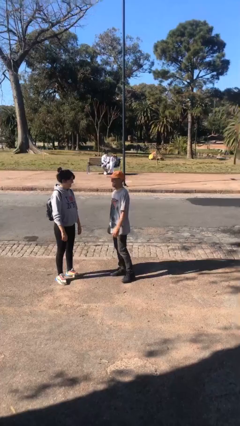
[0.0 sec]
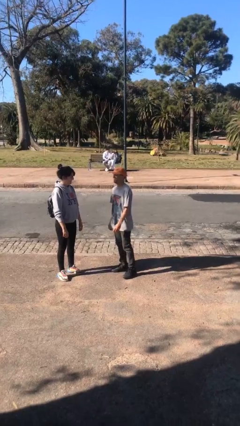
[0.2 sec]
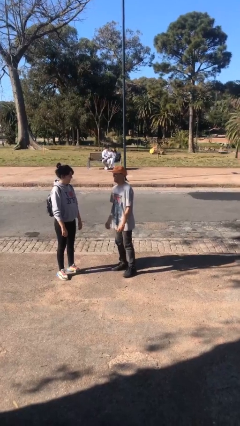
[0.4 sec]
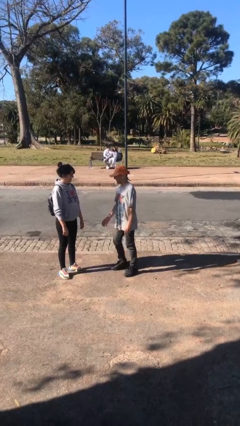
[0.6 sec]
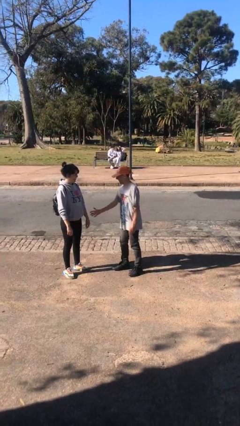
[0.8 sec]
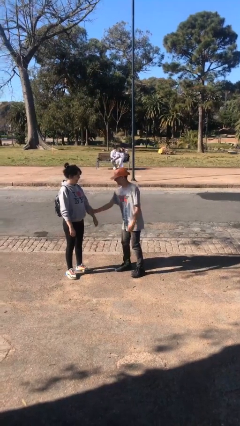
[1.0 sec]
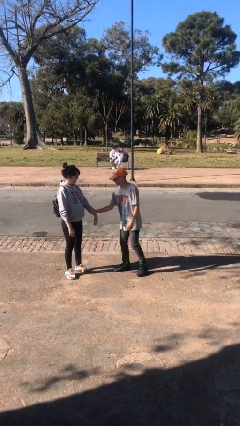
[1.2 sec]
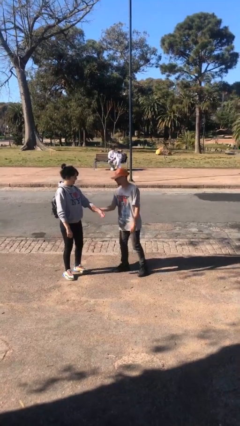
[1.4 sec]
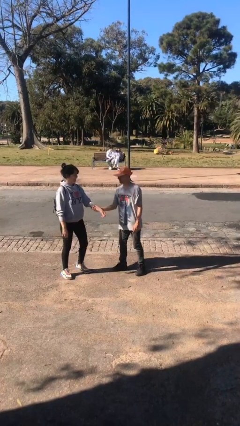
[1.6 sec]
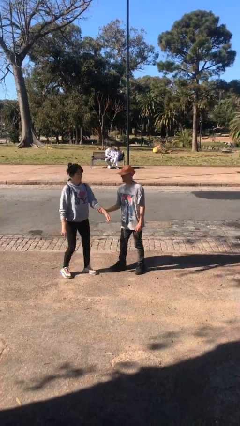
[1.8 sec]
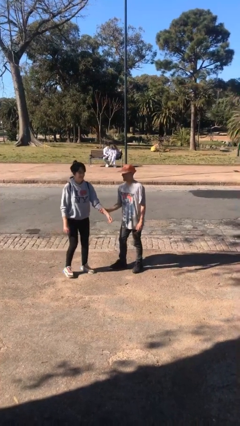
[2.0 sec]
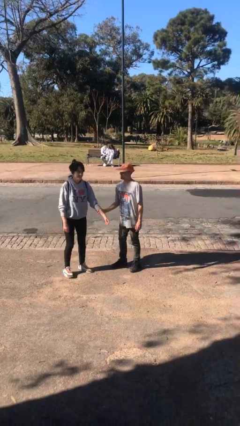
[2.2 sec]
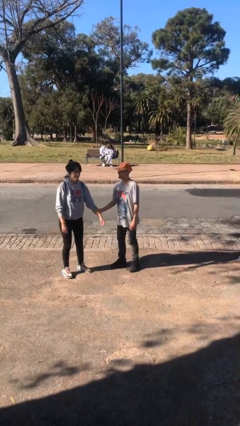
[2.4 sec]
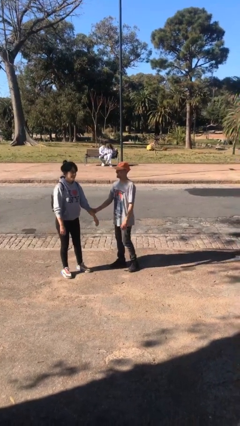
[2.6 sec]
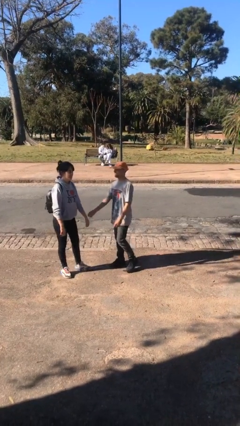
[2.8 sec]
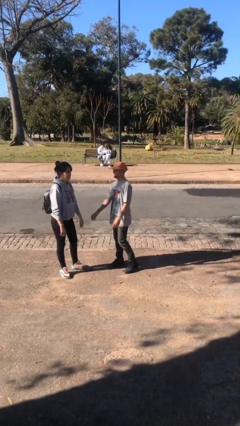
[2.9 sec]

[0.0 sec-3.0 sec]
person grabs person by forearm

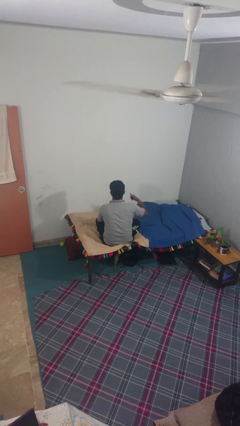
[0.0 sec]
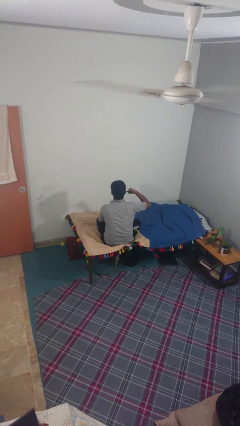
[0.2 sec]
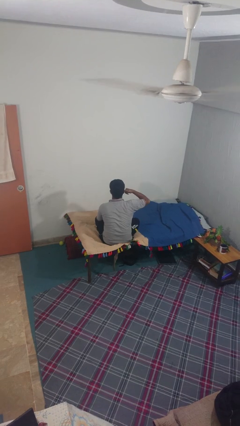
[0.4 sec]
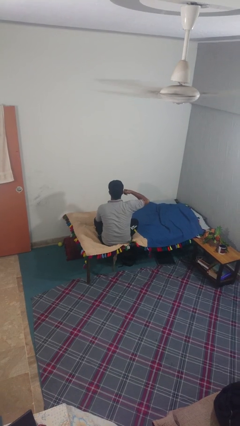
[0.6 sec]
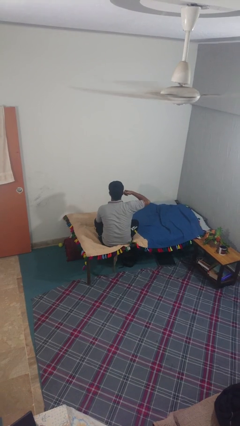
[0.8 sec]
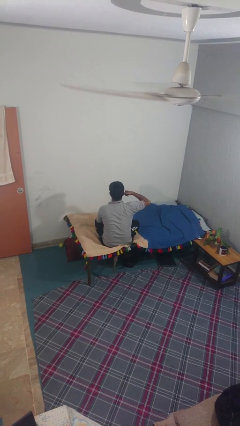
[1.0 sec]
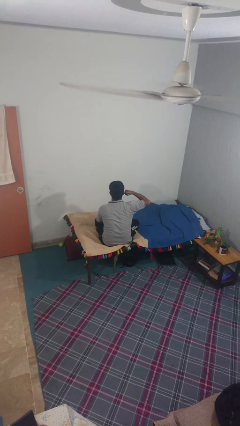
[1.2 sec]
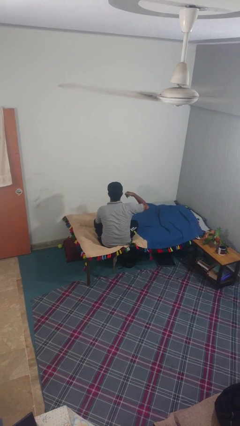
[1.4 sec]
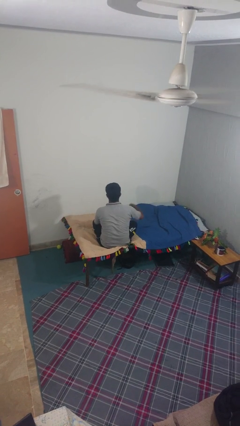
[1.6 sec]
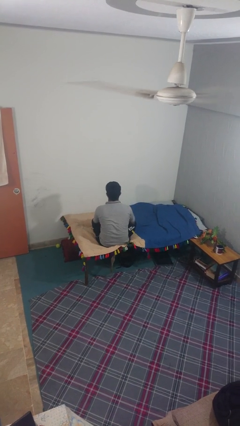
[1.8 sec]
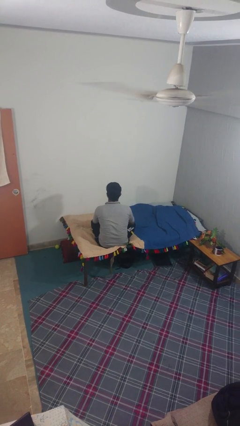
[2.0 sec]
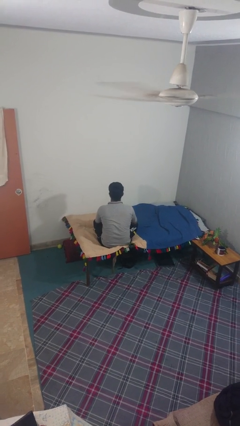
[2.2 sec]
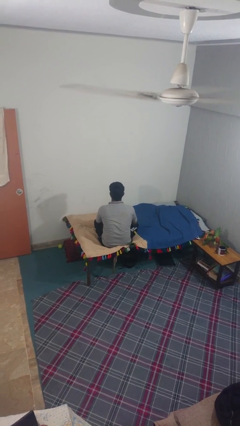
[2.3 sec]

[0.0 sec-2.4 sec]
person gestures call me

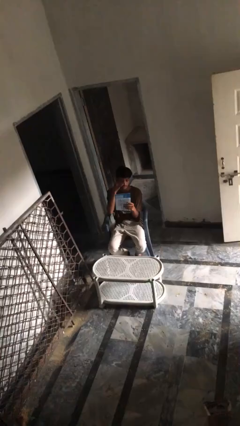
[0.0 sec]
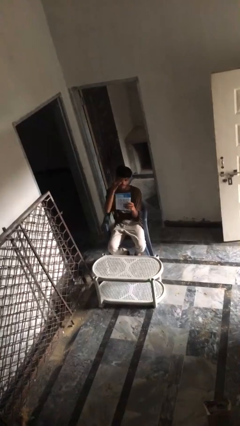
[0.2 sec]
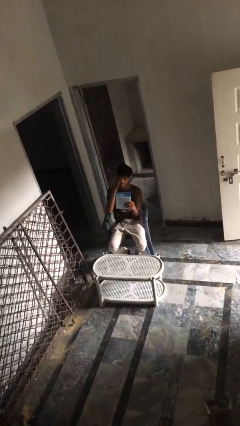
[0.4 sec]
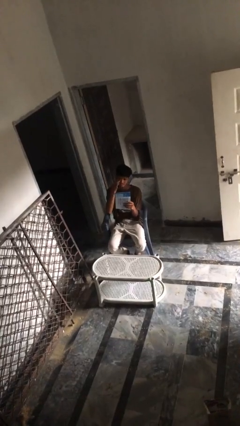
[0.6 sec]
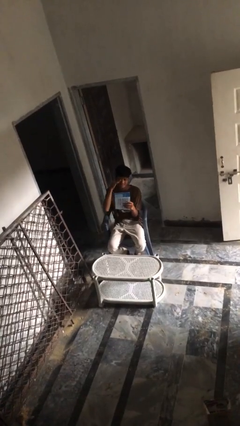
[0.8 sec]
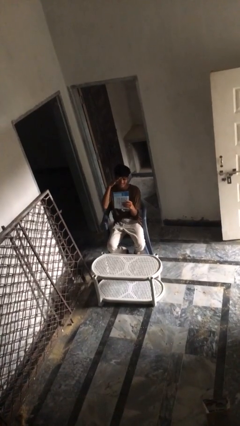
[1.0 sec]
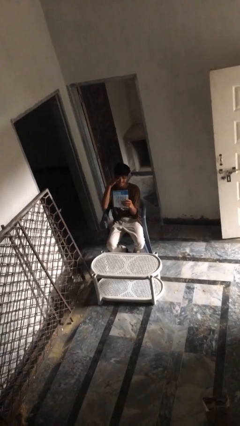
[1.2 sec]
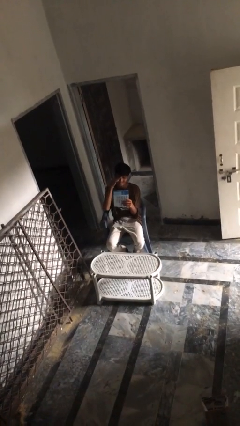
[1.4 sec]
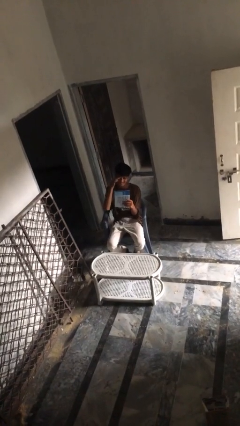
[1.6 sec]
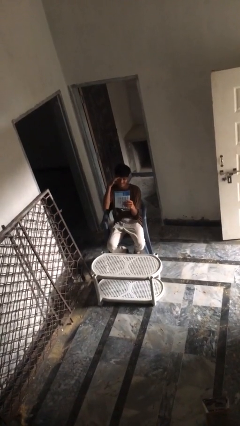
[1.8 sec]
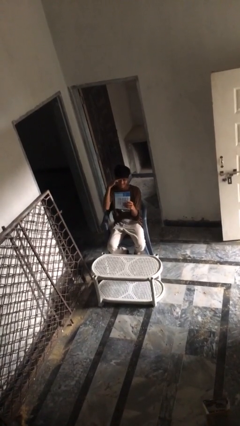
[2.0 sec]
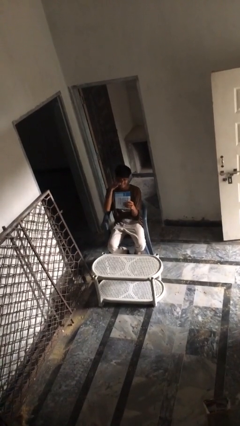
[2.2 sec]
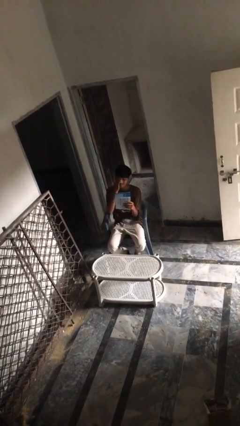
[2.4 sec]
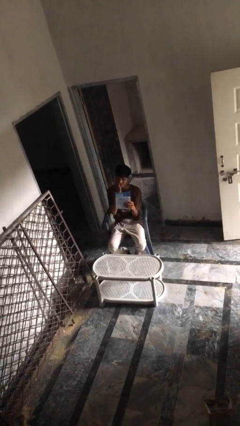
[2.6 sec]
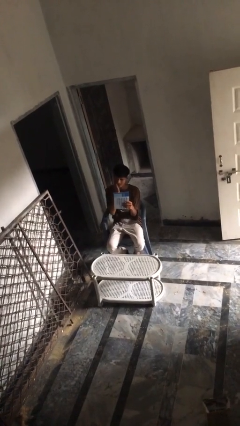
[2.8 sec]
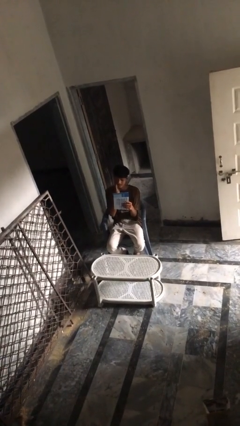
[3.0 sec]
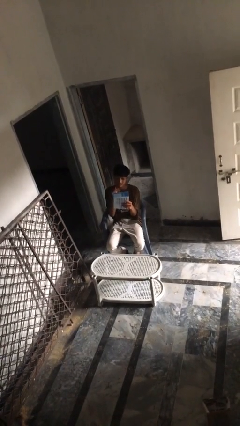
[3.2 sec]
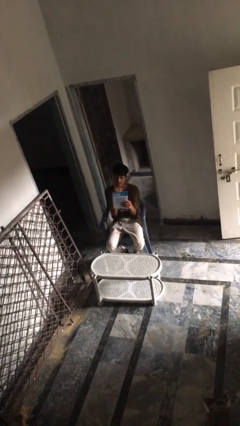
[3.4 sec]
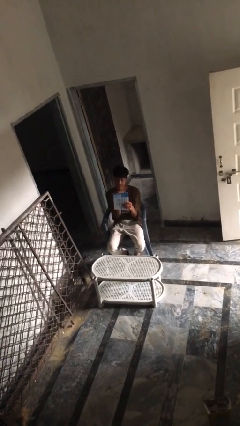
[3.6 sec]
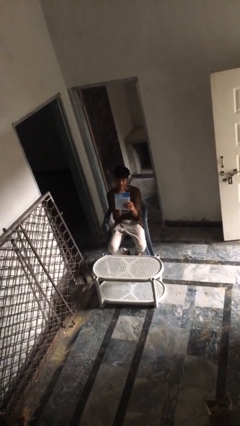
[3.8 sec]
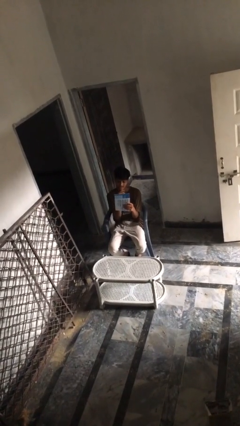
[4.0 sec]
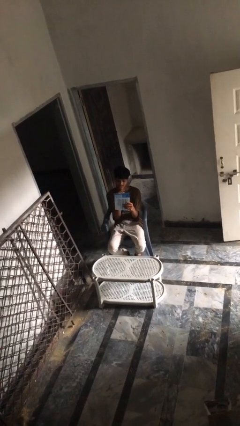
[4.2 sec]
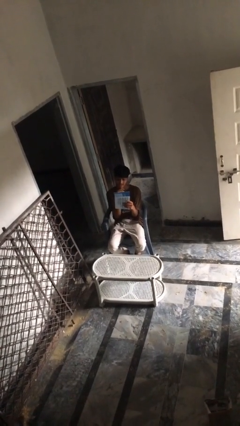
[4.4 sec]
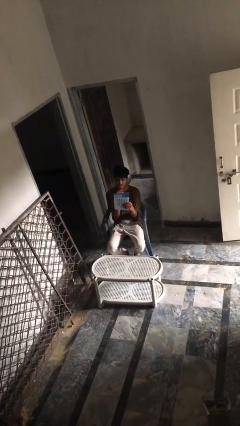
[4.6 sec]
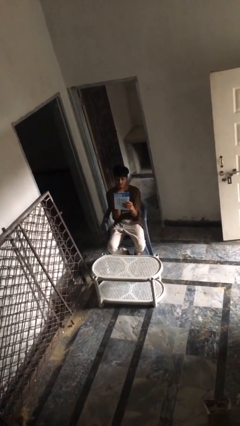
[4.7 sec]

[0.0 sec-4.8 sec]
person reads document

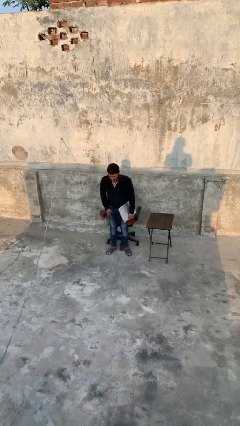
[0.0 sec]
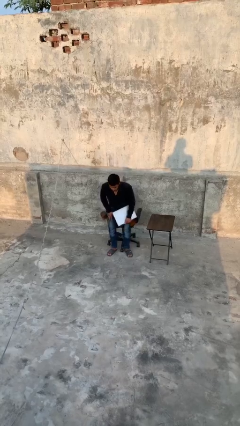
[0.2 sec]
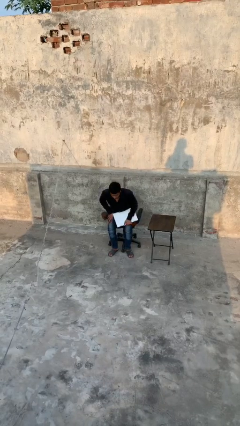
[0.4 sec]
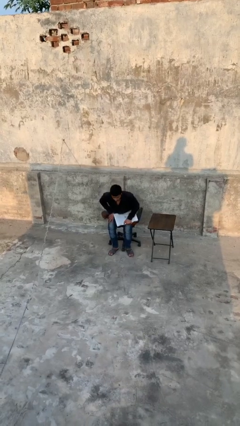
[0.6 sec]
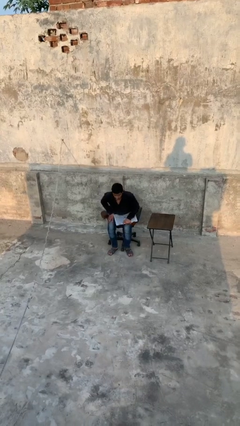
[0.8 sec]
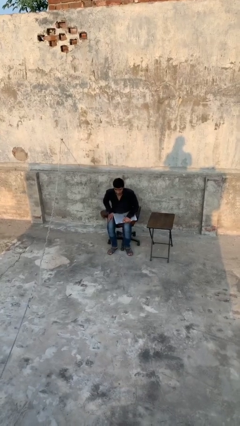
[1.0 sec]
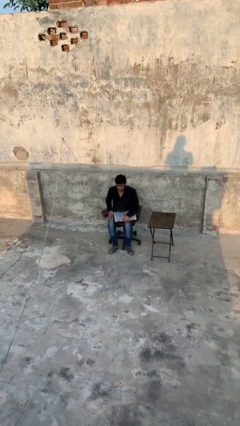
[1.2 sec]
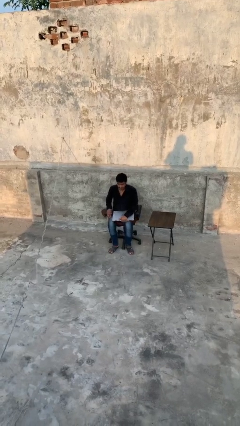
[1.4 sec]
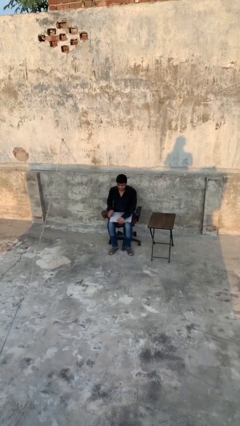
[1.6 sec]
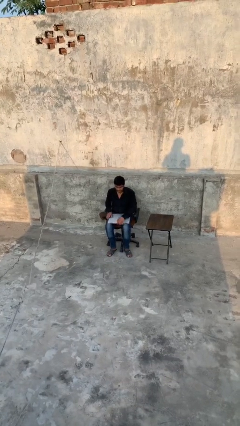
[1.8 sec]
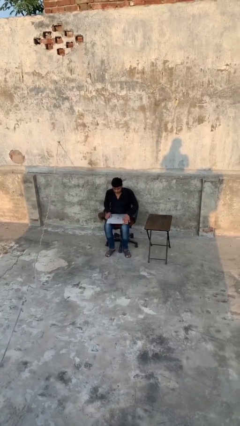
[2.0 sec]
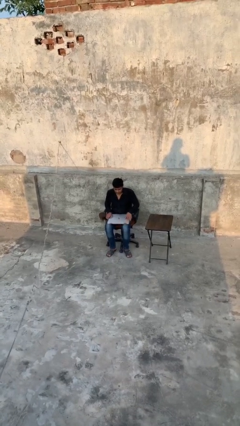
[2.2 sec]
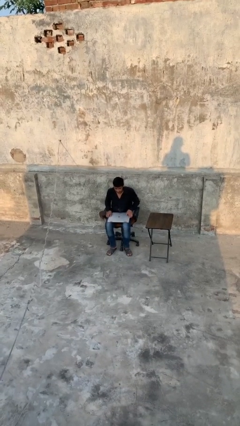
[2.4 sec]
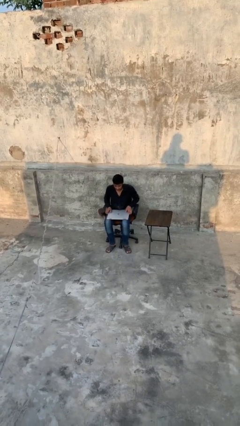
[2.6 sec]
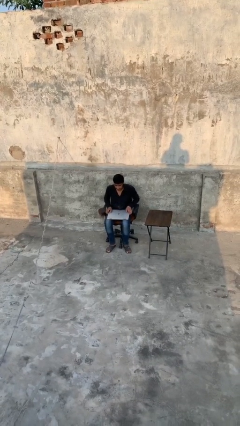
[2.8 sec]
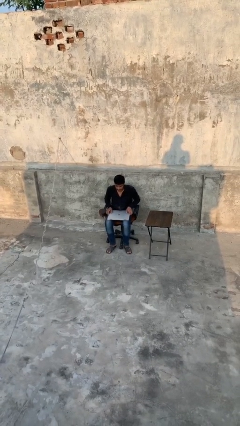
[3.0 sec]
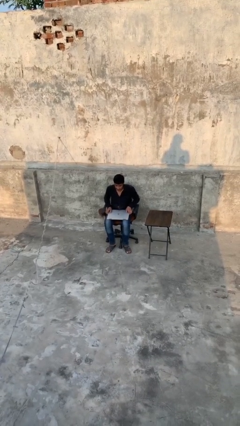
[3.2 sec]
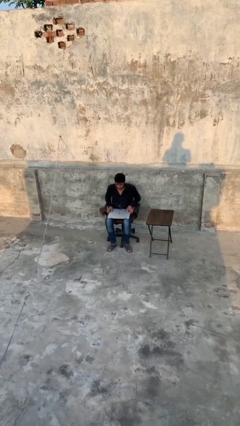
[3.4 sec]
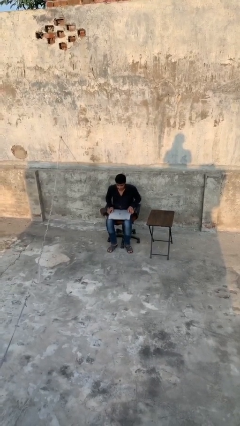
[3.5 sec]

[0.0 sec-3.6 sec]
person sits down

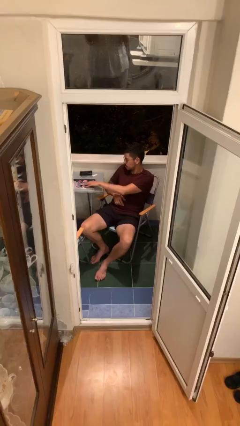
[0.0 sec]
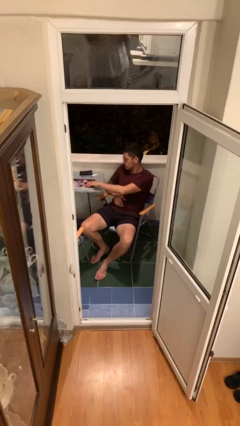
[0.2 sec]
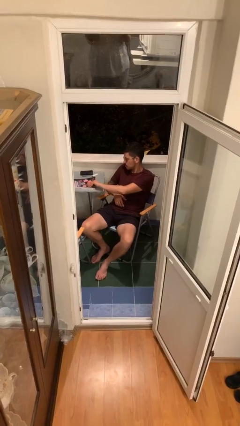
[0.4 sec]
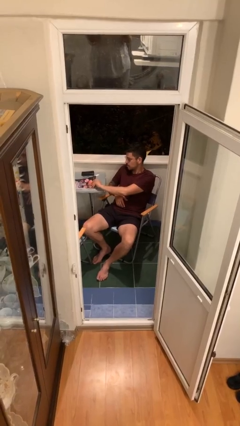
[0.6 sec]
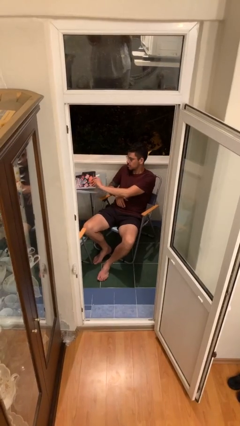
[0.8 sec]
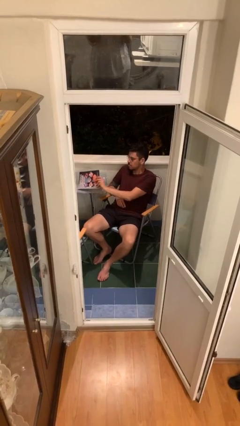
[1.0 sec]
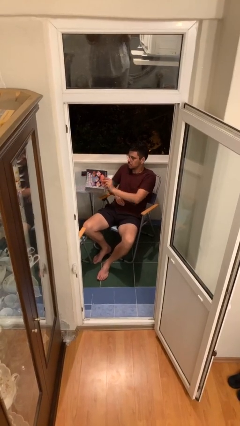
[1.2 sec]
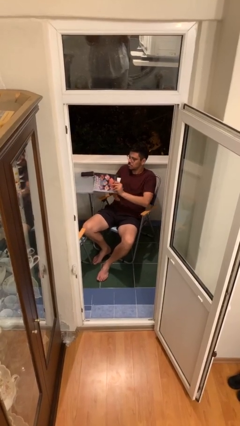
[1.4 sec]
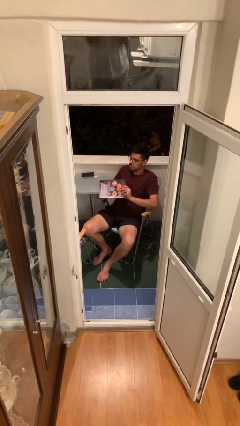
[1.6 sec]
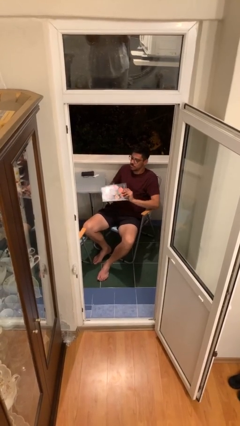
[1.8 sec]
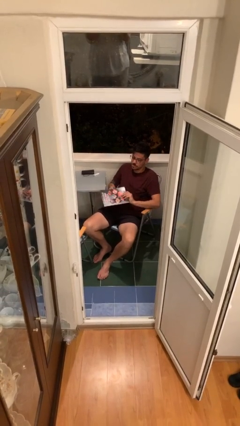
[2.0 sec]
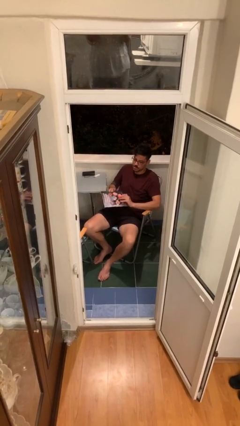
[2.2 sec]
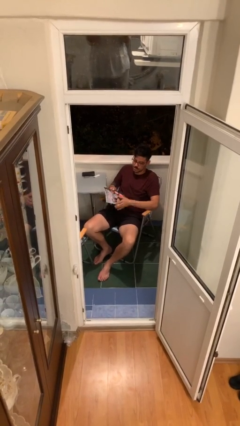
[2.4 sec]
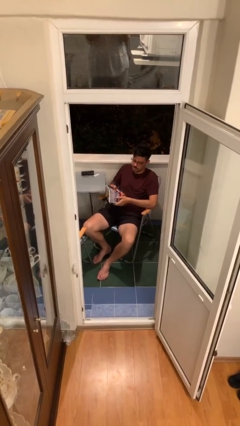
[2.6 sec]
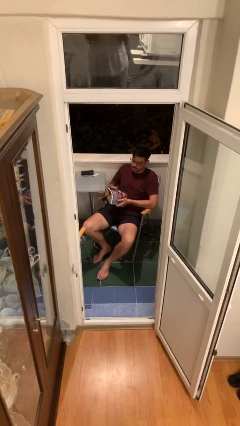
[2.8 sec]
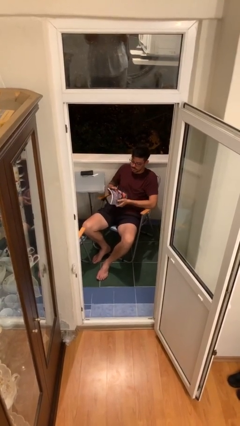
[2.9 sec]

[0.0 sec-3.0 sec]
person picks up object from table

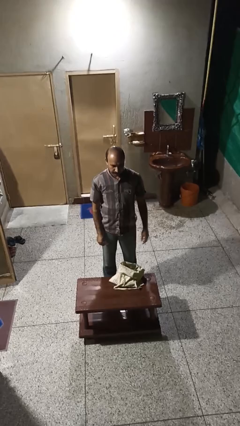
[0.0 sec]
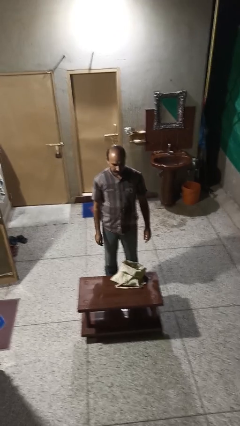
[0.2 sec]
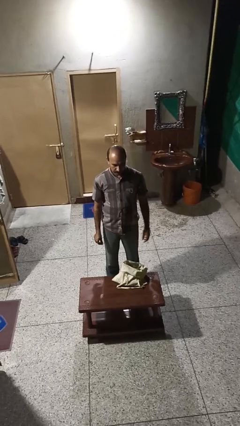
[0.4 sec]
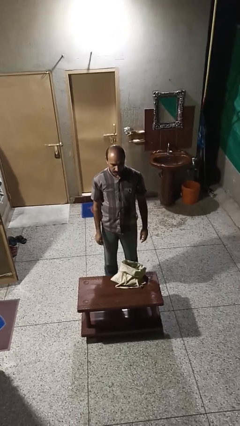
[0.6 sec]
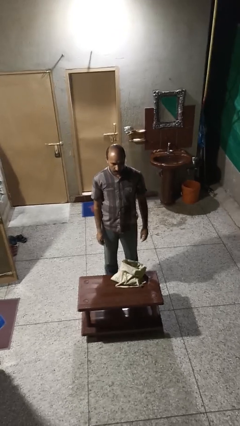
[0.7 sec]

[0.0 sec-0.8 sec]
person takes object from bag
